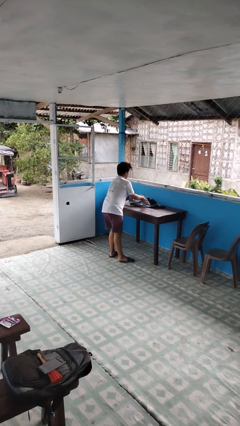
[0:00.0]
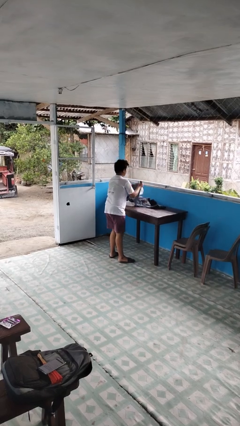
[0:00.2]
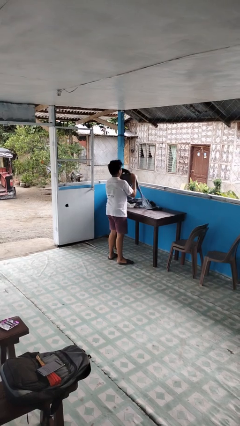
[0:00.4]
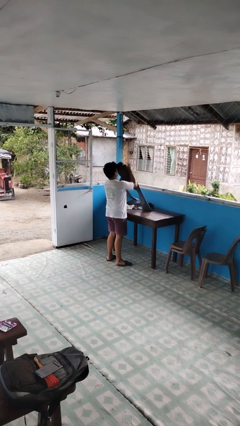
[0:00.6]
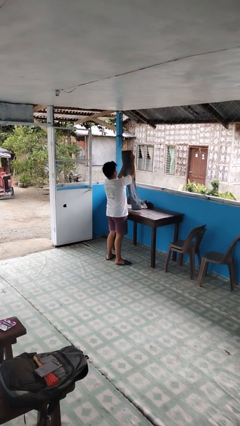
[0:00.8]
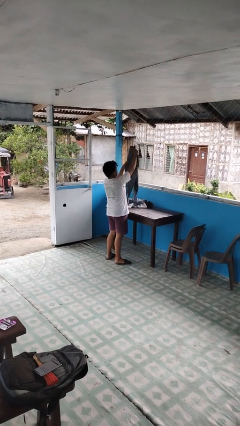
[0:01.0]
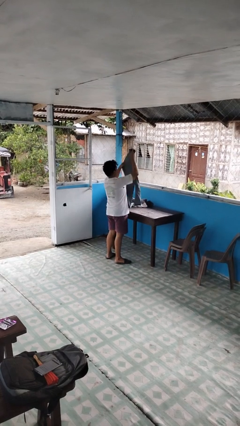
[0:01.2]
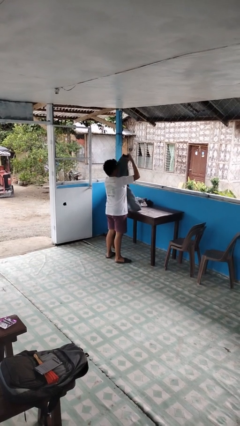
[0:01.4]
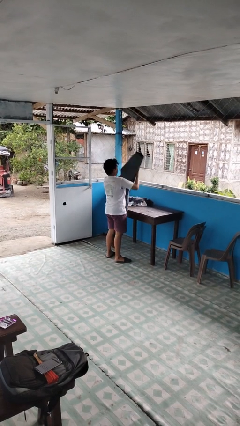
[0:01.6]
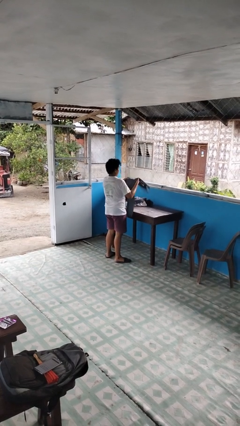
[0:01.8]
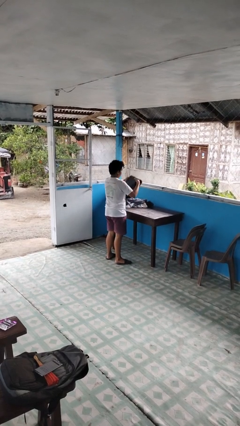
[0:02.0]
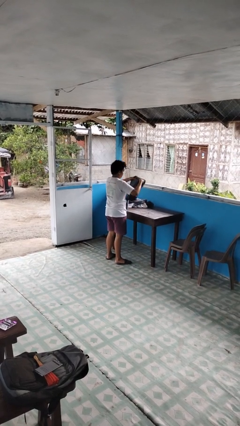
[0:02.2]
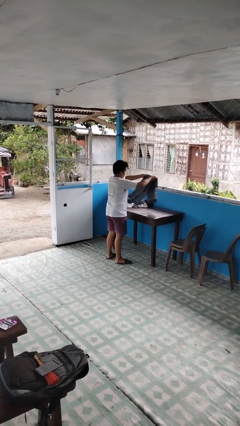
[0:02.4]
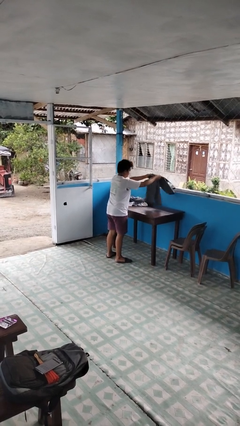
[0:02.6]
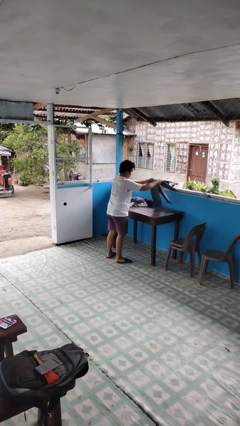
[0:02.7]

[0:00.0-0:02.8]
person folds pants

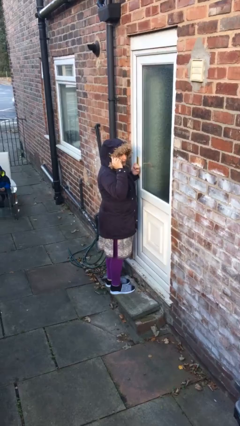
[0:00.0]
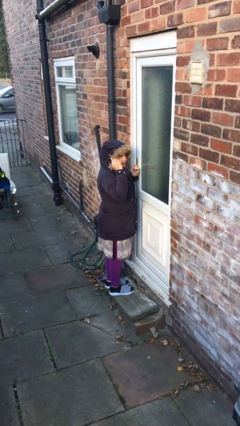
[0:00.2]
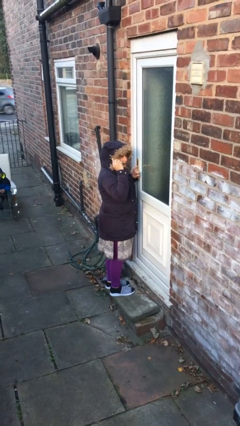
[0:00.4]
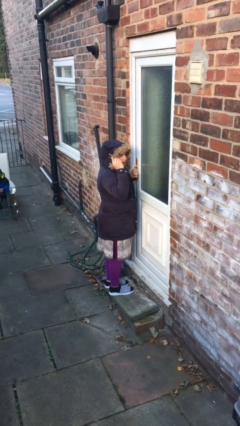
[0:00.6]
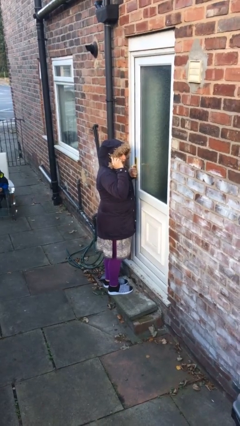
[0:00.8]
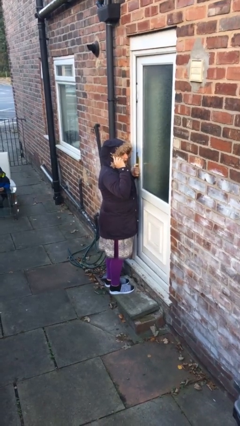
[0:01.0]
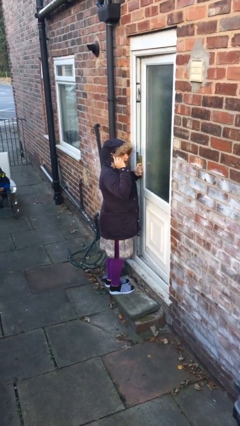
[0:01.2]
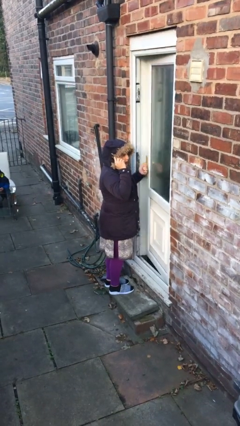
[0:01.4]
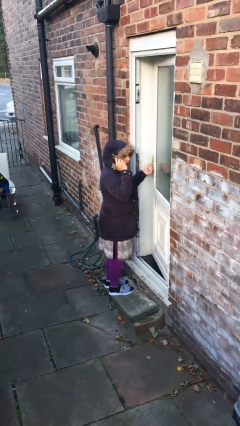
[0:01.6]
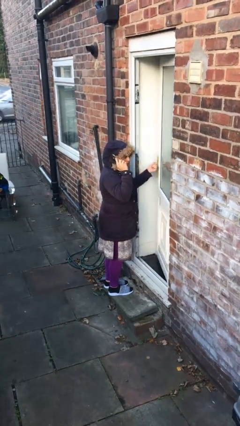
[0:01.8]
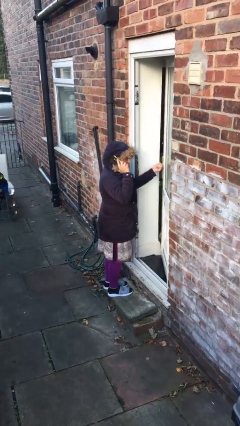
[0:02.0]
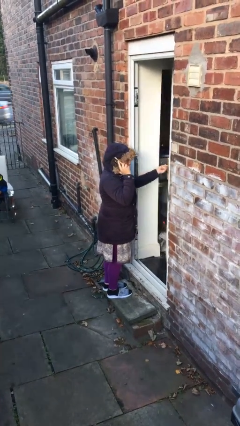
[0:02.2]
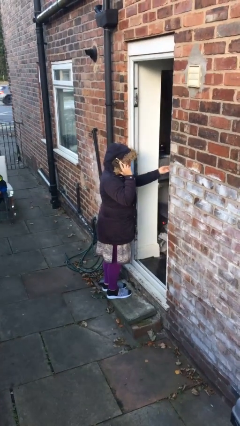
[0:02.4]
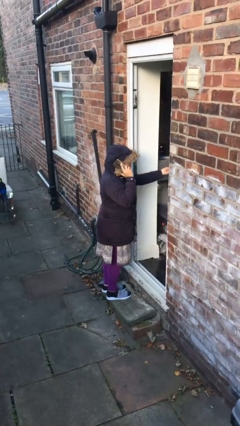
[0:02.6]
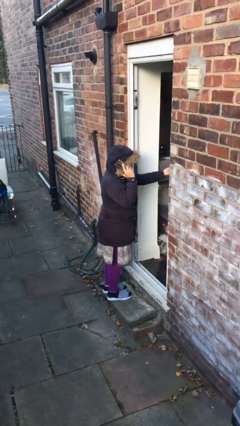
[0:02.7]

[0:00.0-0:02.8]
person opens facility door

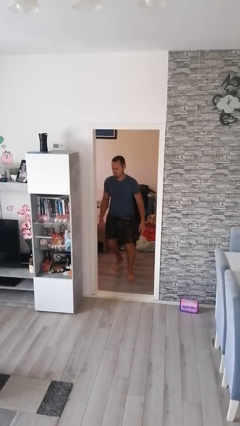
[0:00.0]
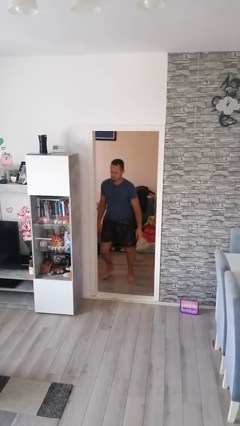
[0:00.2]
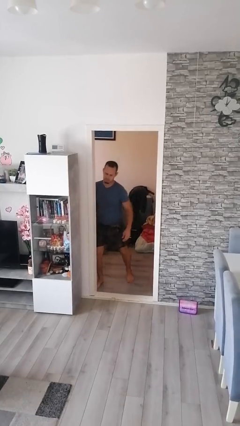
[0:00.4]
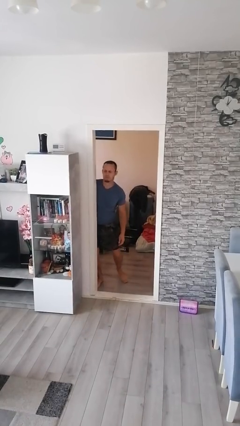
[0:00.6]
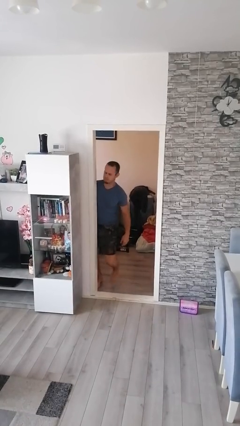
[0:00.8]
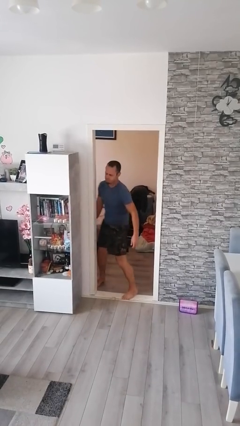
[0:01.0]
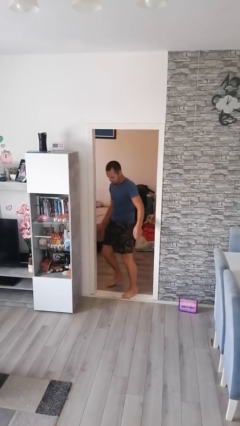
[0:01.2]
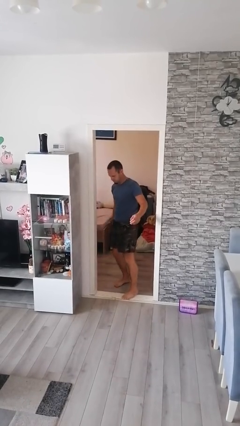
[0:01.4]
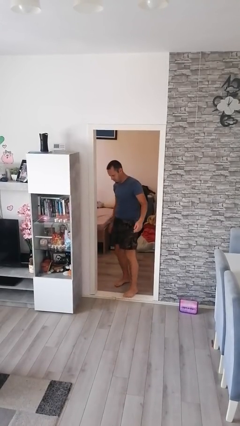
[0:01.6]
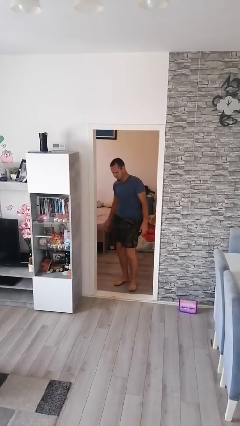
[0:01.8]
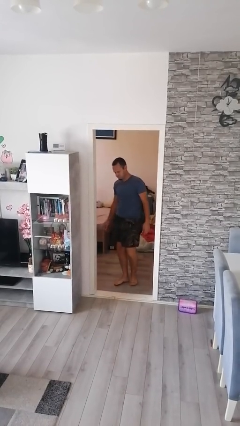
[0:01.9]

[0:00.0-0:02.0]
person bumps into wall

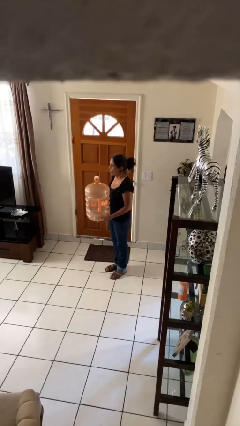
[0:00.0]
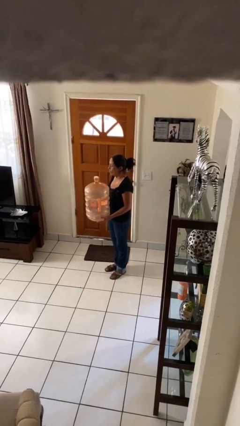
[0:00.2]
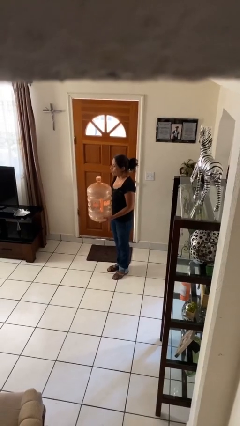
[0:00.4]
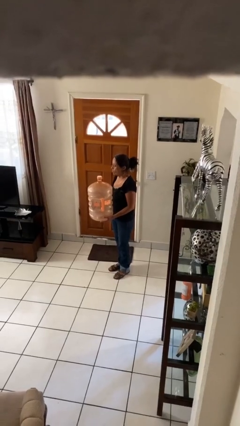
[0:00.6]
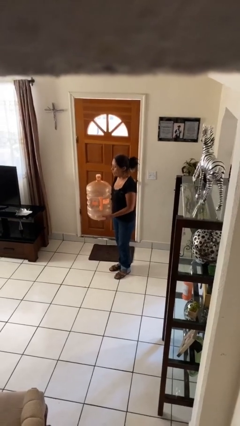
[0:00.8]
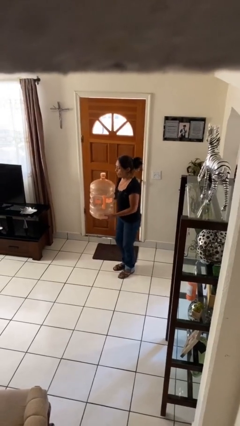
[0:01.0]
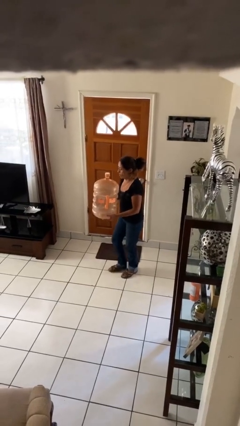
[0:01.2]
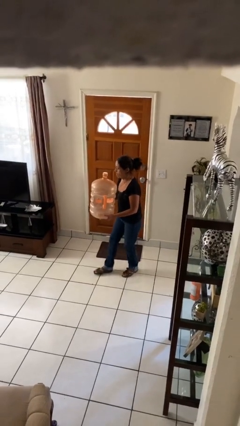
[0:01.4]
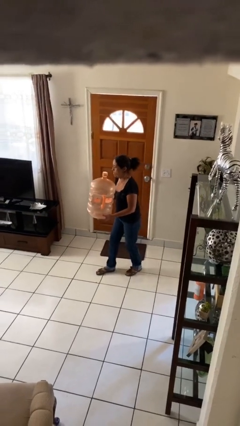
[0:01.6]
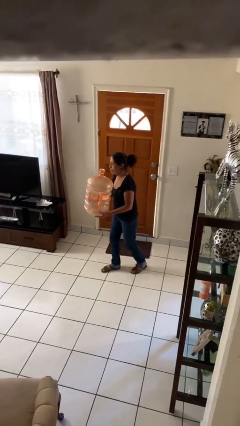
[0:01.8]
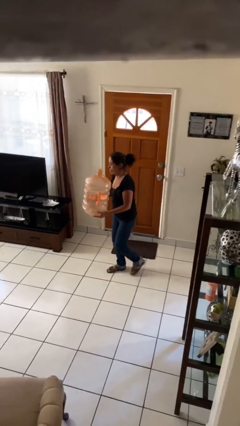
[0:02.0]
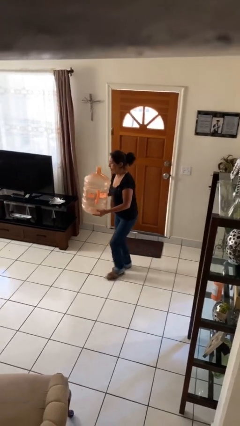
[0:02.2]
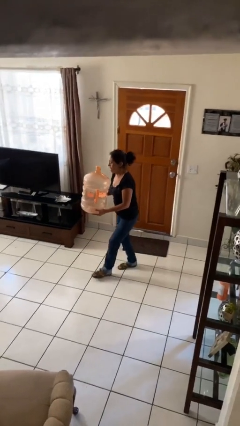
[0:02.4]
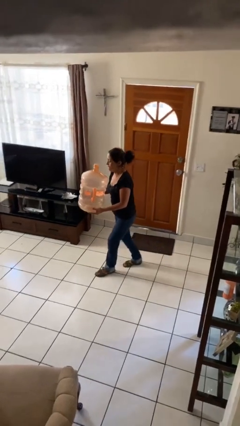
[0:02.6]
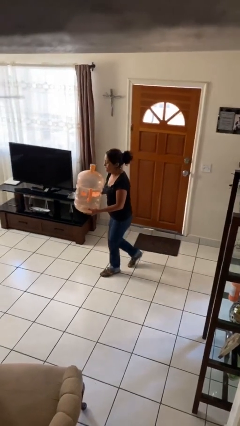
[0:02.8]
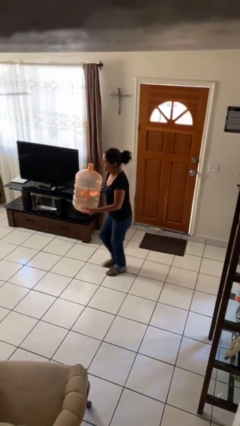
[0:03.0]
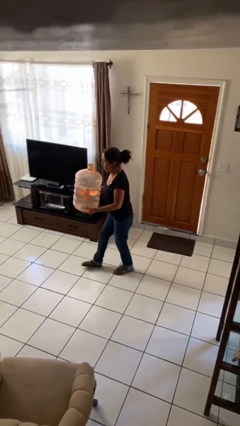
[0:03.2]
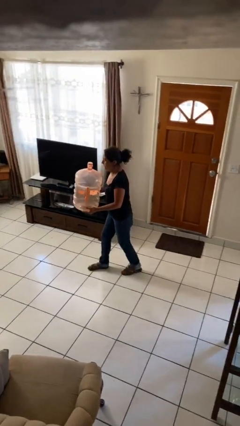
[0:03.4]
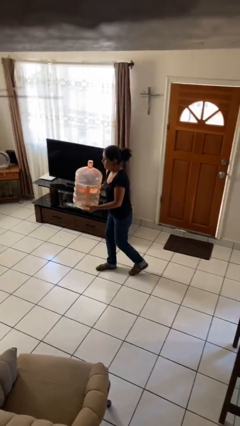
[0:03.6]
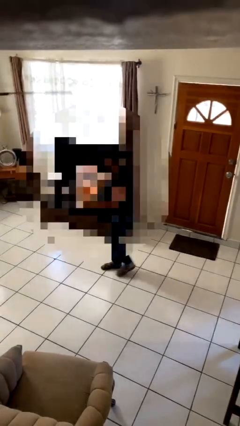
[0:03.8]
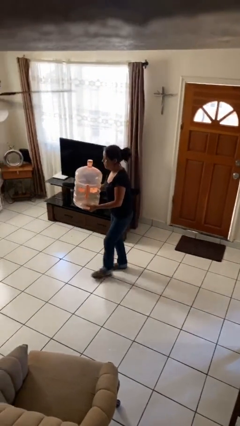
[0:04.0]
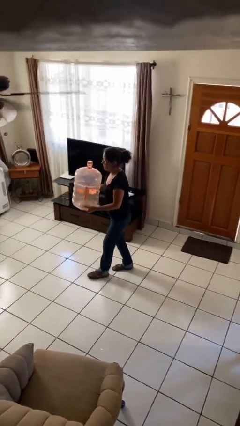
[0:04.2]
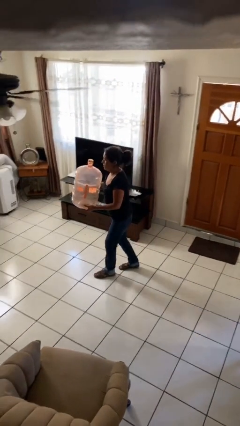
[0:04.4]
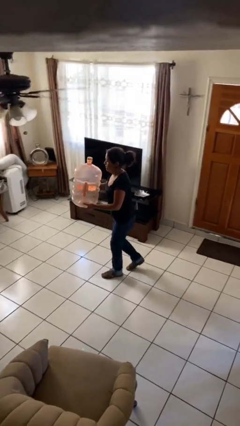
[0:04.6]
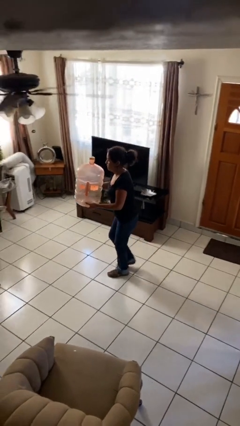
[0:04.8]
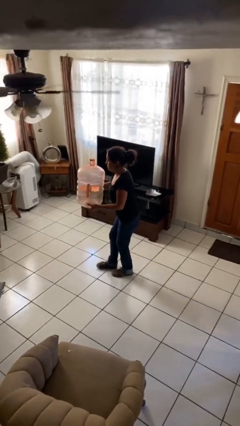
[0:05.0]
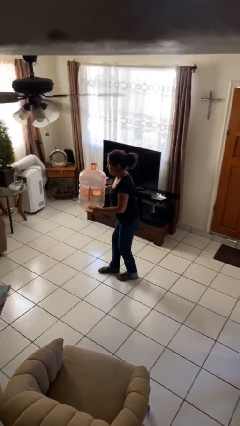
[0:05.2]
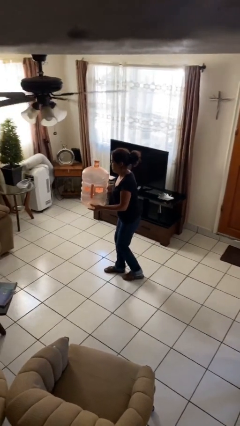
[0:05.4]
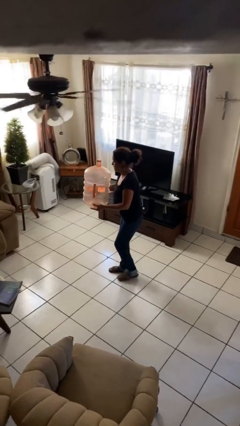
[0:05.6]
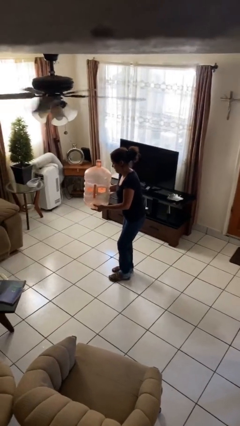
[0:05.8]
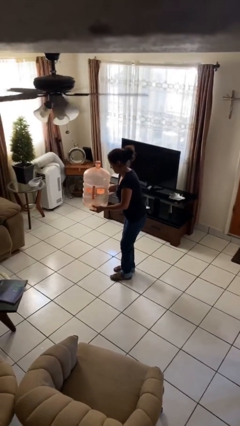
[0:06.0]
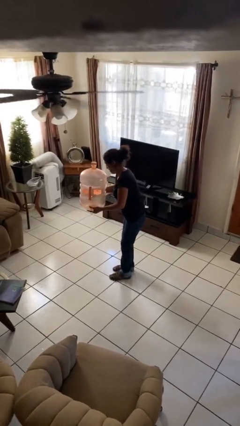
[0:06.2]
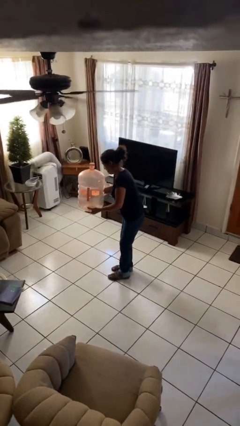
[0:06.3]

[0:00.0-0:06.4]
person carries heavy object

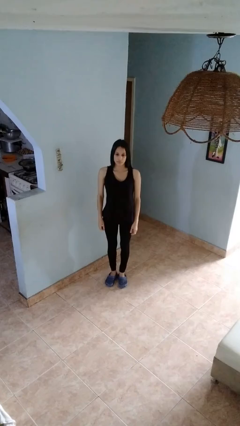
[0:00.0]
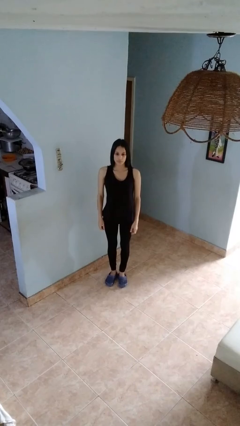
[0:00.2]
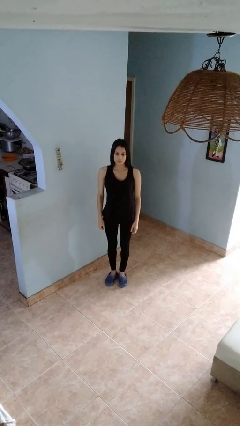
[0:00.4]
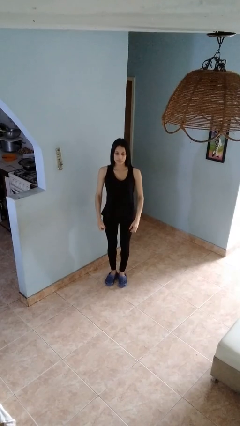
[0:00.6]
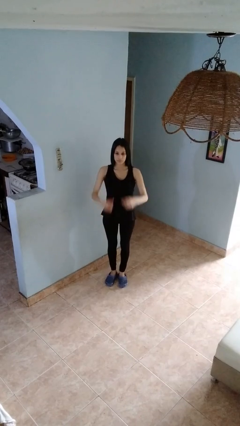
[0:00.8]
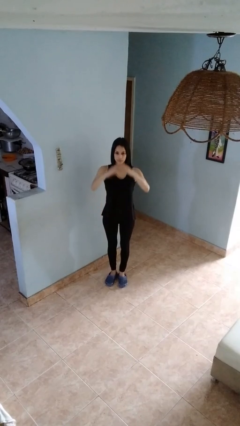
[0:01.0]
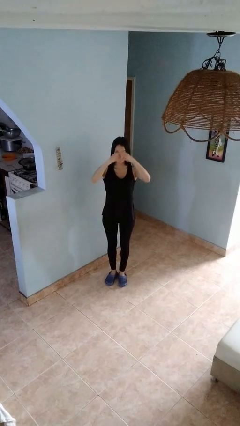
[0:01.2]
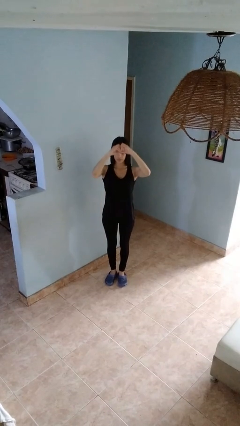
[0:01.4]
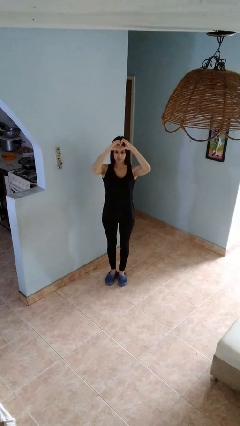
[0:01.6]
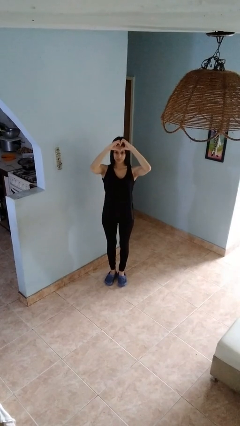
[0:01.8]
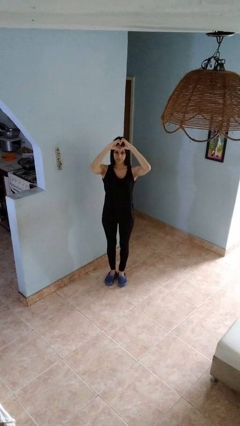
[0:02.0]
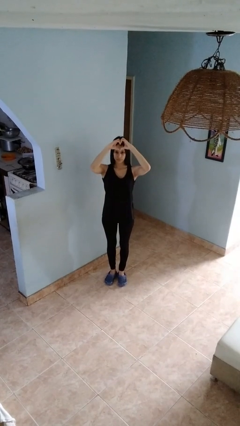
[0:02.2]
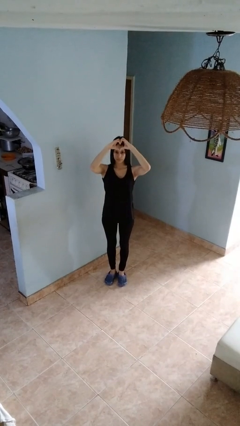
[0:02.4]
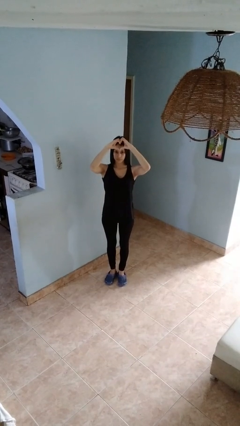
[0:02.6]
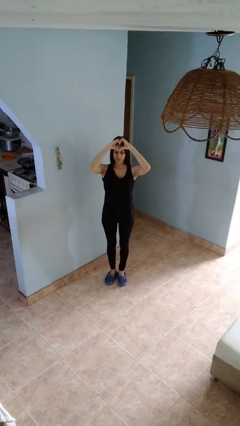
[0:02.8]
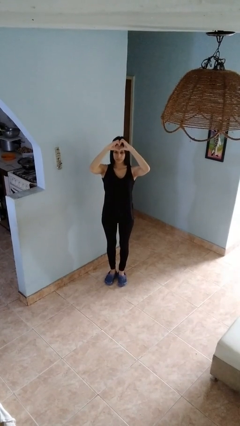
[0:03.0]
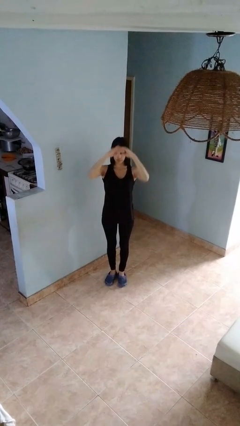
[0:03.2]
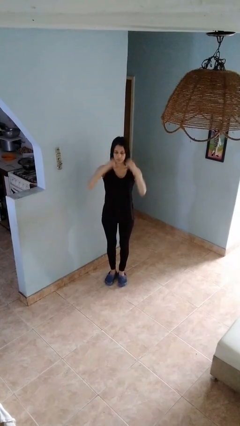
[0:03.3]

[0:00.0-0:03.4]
person gestures heart

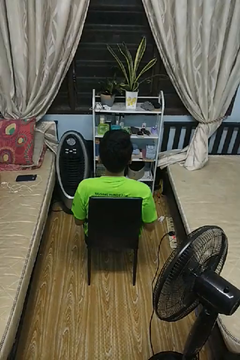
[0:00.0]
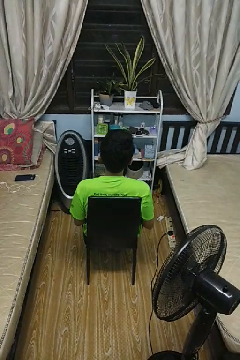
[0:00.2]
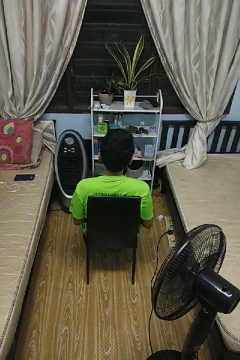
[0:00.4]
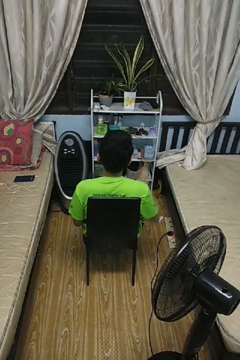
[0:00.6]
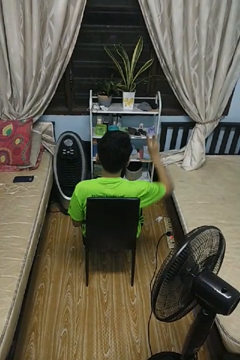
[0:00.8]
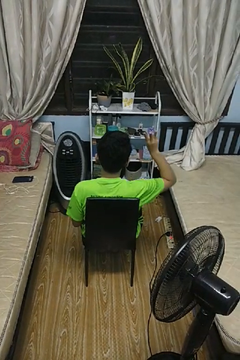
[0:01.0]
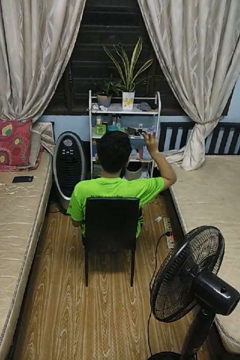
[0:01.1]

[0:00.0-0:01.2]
person gestures number three
